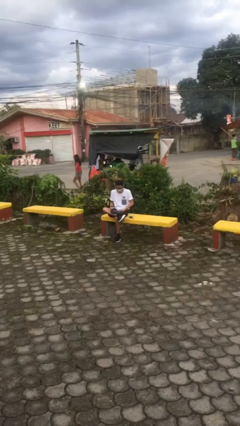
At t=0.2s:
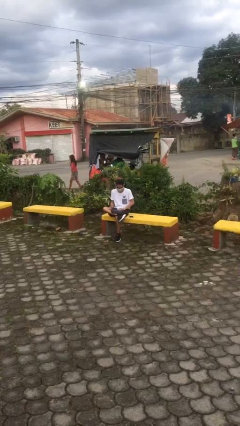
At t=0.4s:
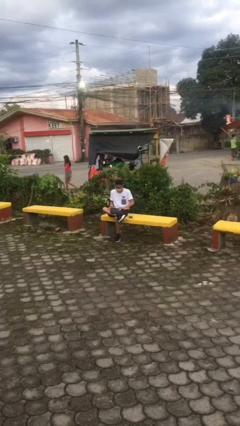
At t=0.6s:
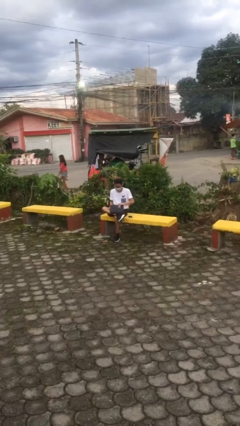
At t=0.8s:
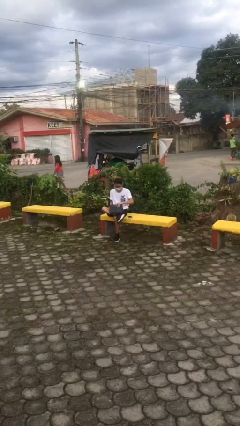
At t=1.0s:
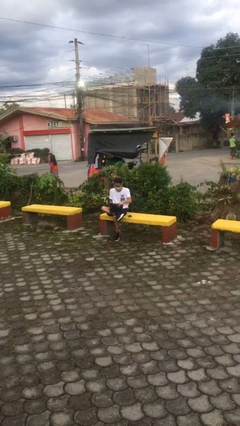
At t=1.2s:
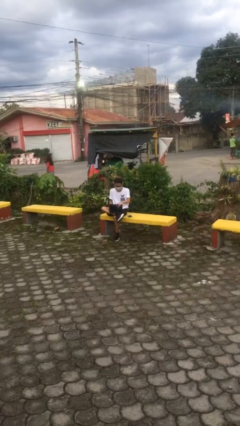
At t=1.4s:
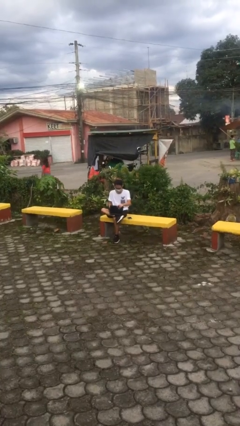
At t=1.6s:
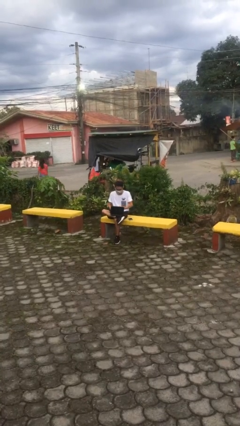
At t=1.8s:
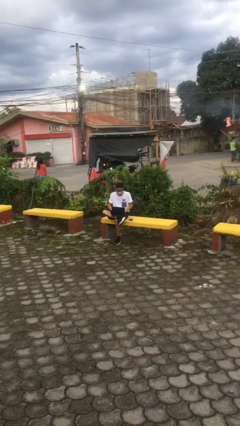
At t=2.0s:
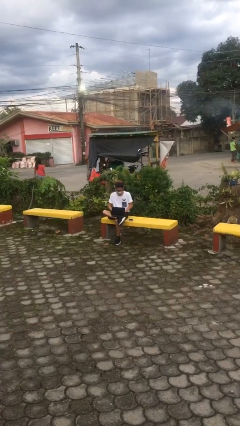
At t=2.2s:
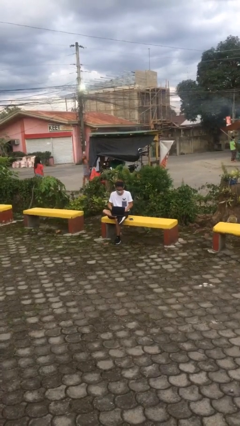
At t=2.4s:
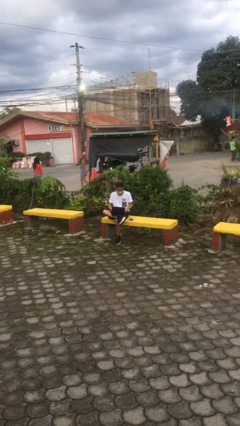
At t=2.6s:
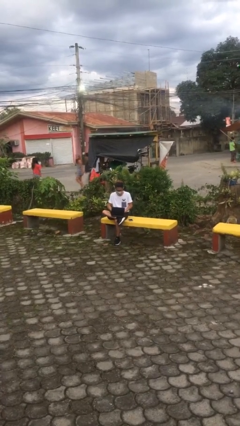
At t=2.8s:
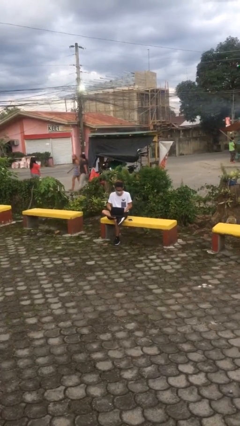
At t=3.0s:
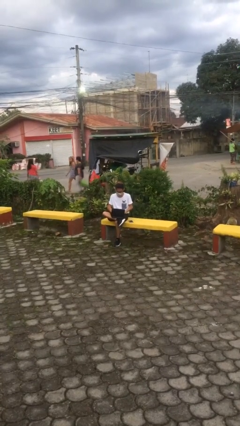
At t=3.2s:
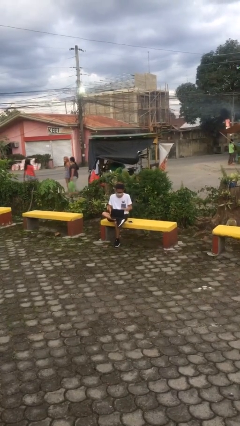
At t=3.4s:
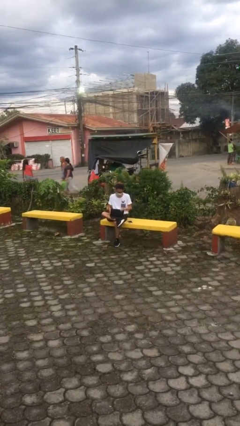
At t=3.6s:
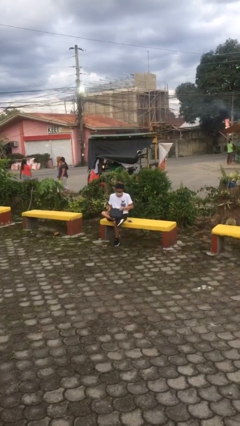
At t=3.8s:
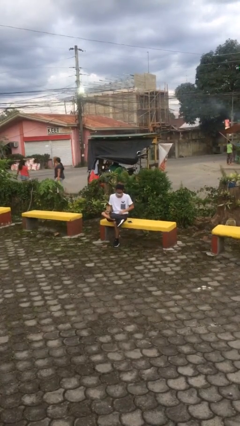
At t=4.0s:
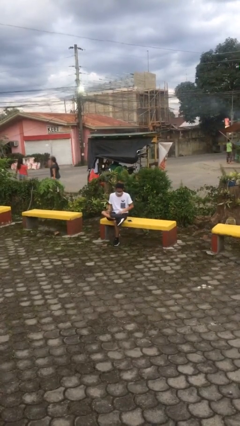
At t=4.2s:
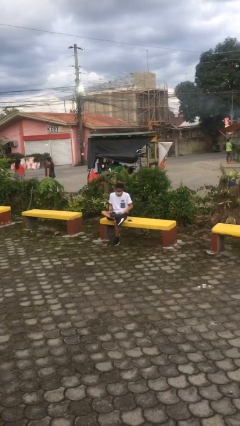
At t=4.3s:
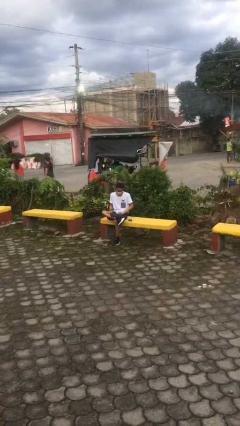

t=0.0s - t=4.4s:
person interacts with laptop

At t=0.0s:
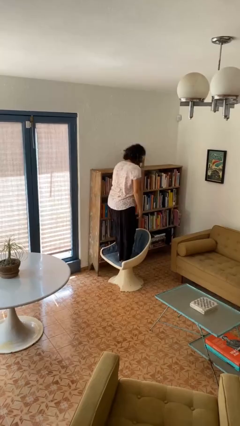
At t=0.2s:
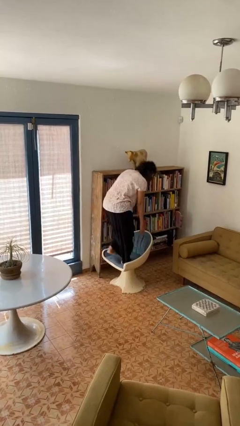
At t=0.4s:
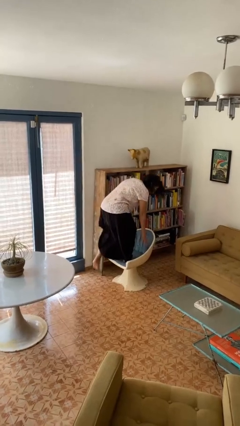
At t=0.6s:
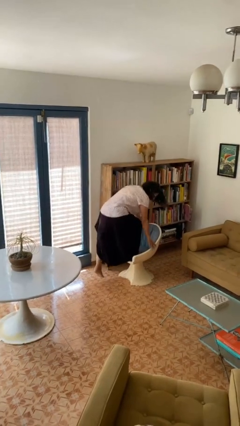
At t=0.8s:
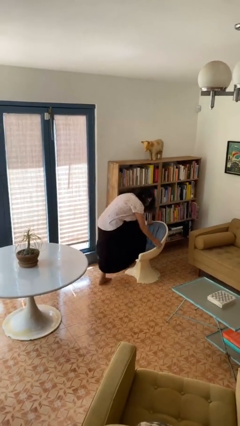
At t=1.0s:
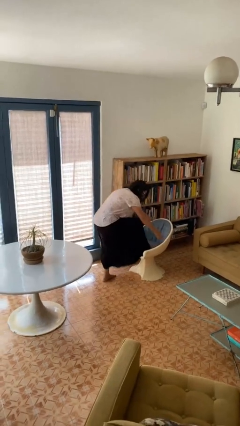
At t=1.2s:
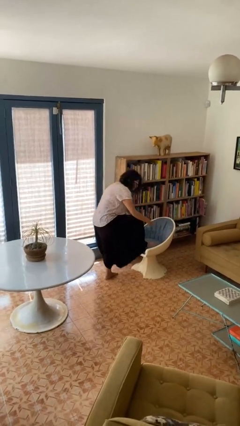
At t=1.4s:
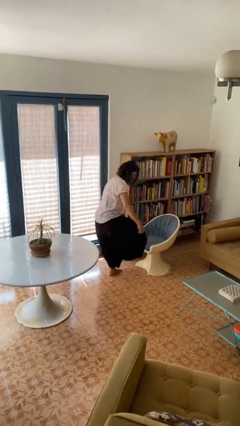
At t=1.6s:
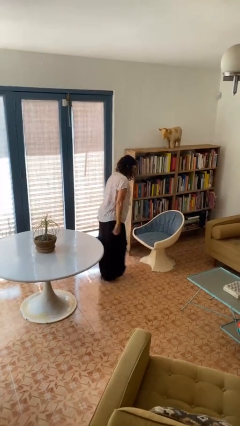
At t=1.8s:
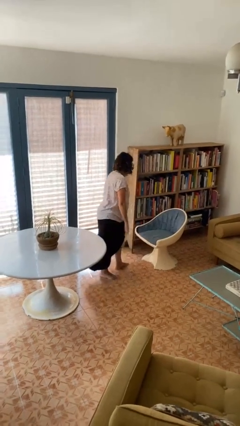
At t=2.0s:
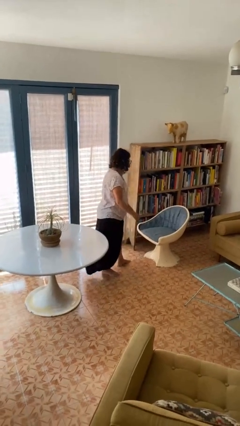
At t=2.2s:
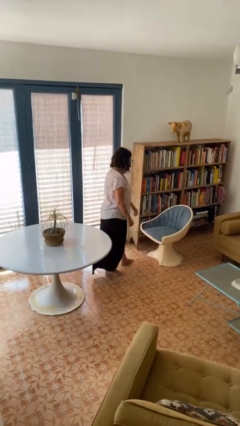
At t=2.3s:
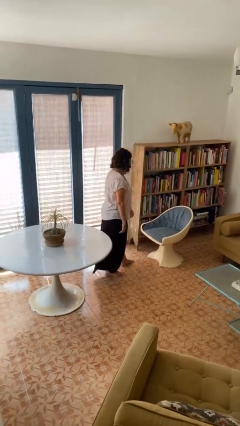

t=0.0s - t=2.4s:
person climbs off chair

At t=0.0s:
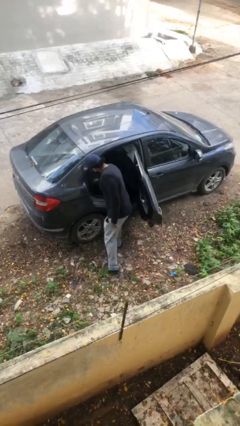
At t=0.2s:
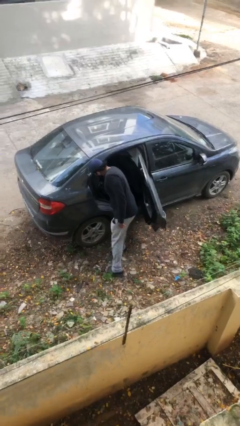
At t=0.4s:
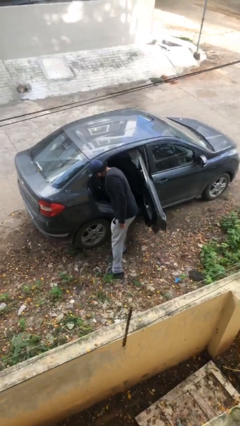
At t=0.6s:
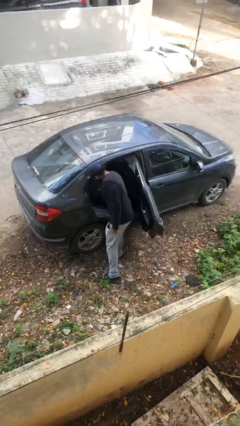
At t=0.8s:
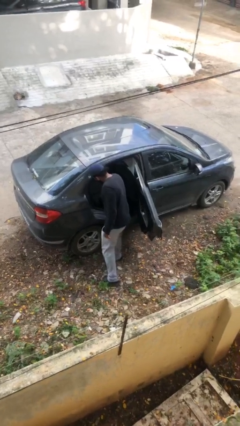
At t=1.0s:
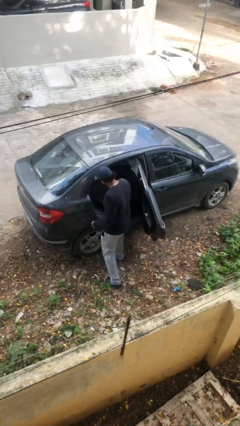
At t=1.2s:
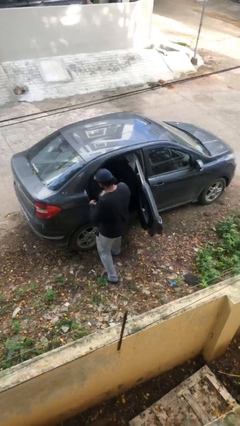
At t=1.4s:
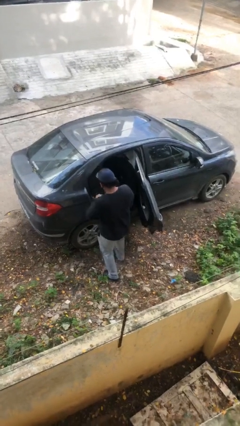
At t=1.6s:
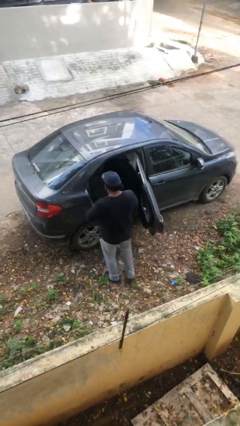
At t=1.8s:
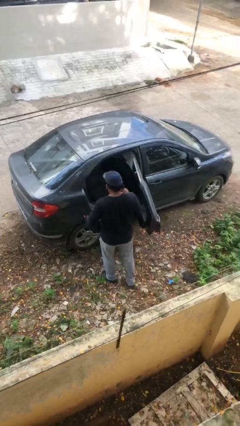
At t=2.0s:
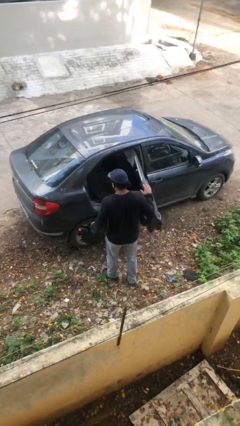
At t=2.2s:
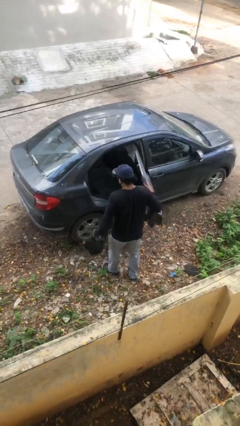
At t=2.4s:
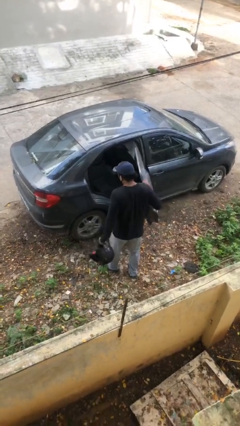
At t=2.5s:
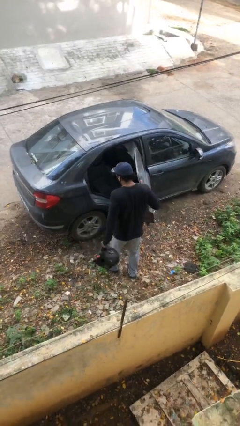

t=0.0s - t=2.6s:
person unloads car

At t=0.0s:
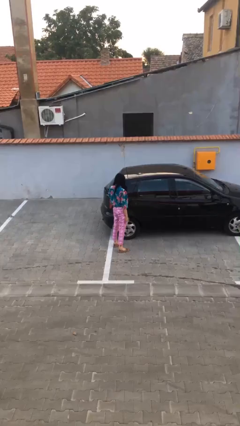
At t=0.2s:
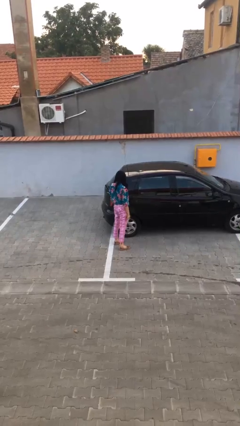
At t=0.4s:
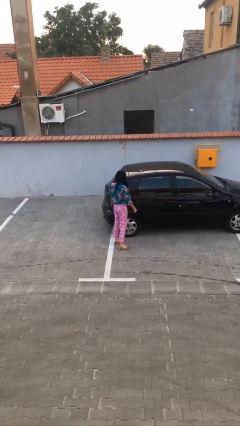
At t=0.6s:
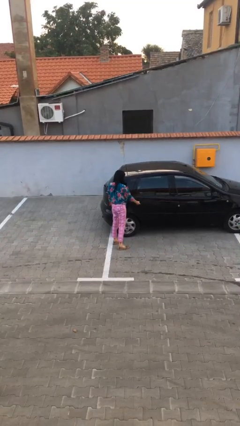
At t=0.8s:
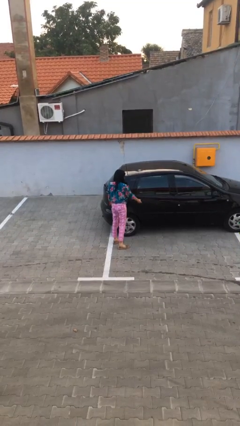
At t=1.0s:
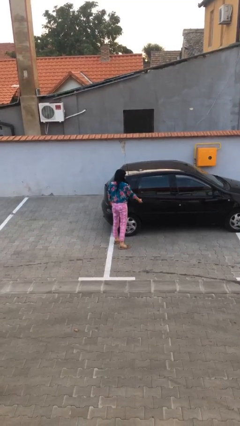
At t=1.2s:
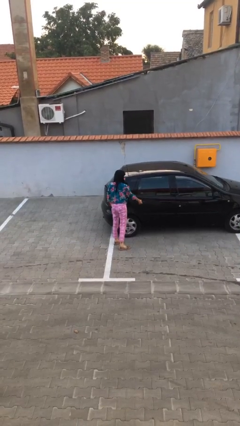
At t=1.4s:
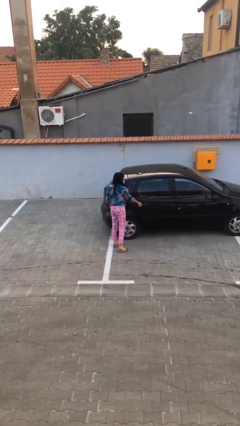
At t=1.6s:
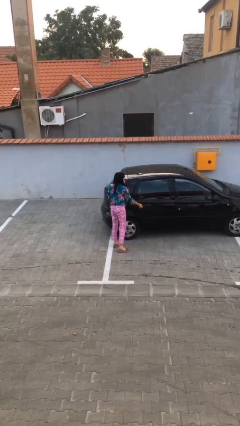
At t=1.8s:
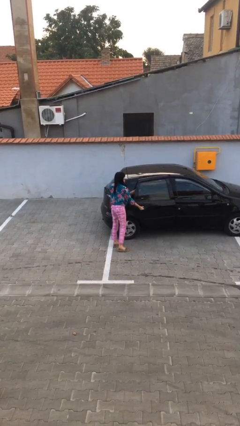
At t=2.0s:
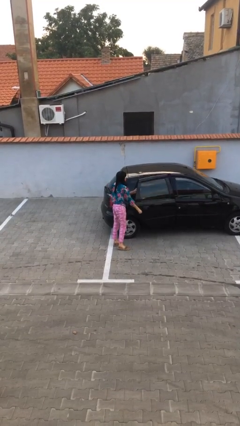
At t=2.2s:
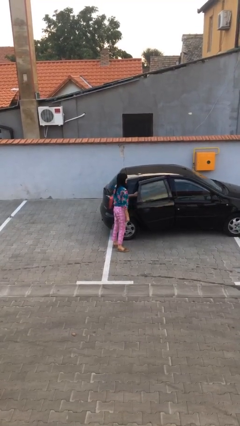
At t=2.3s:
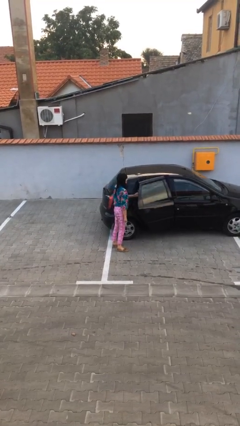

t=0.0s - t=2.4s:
person opens car door

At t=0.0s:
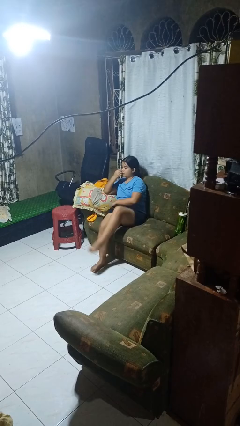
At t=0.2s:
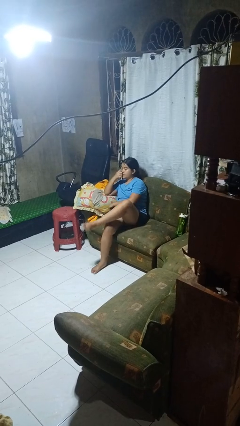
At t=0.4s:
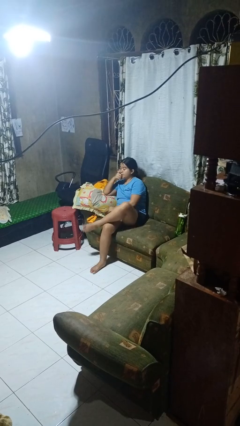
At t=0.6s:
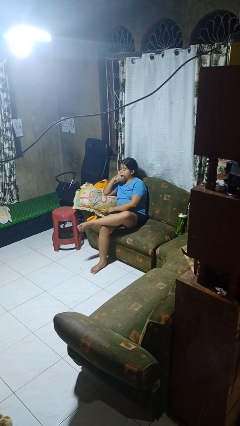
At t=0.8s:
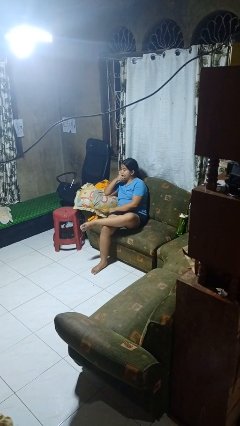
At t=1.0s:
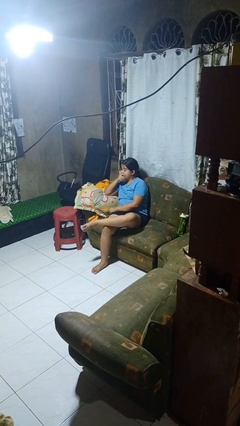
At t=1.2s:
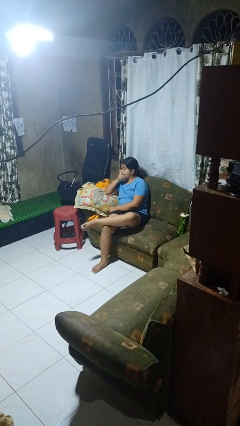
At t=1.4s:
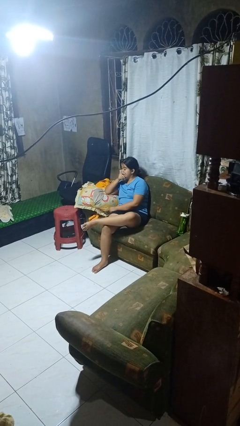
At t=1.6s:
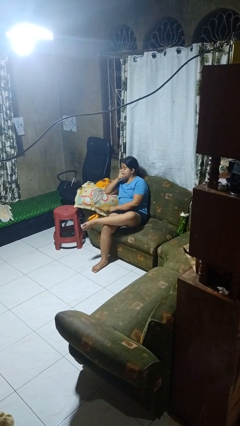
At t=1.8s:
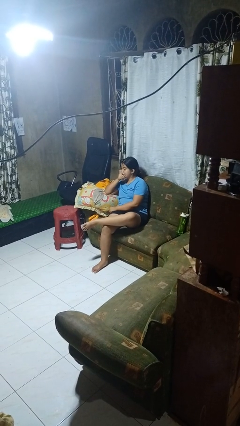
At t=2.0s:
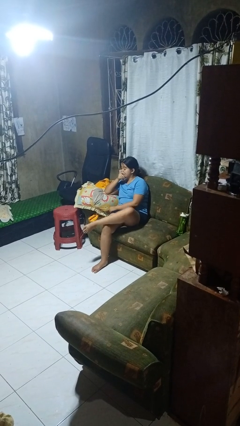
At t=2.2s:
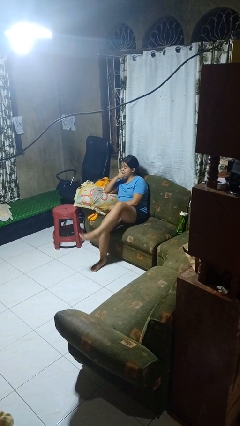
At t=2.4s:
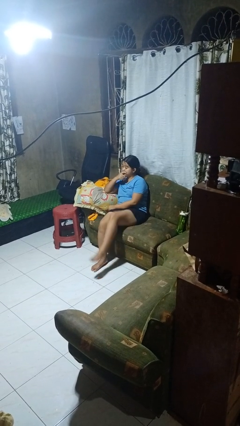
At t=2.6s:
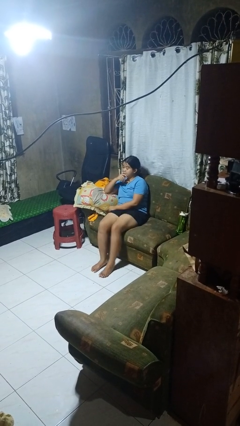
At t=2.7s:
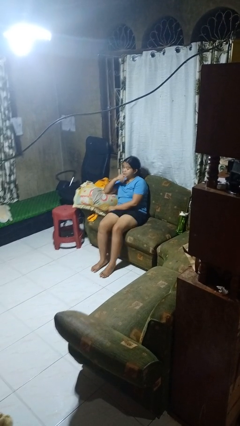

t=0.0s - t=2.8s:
person crosses legs

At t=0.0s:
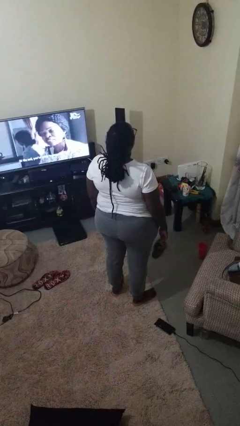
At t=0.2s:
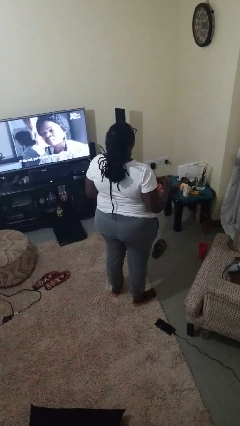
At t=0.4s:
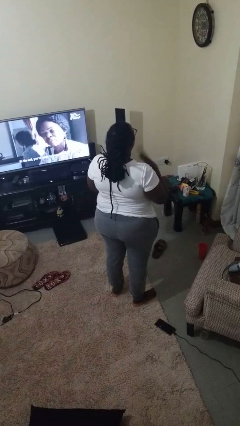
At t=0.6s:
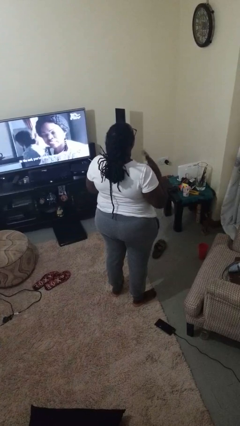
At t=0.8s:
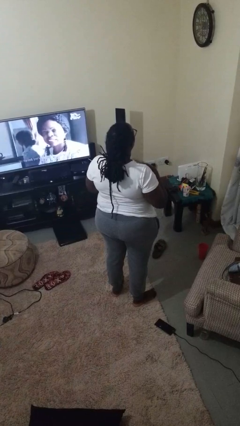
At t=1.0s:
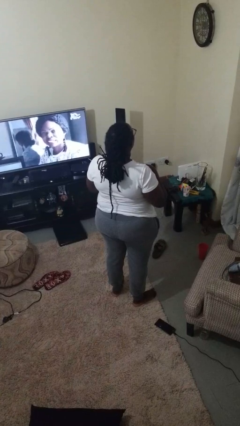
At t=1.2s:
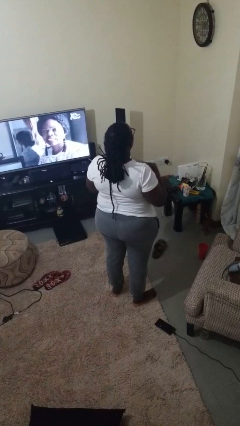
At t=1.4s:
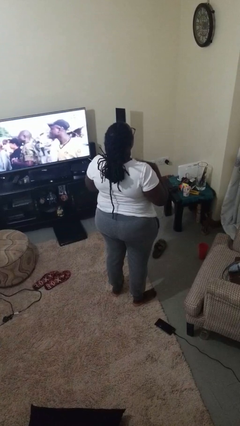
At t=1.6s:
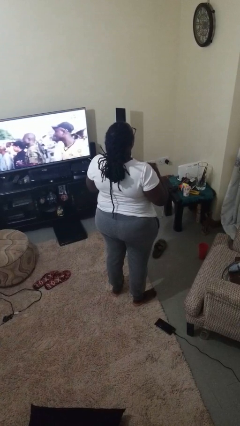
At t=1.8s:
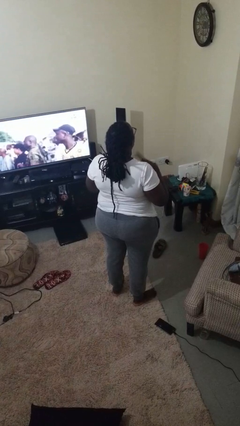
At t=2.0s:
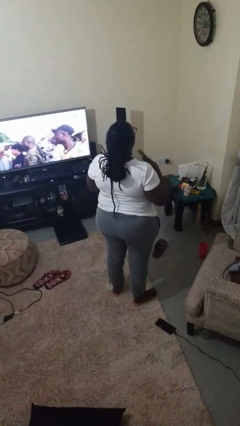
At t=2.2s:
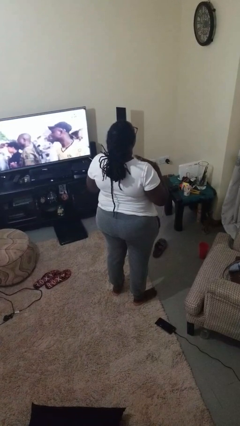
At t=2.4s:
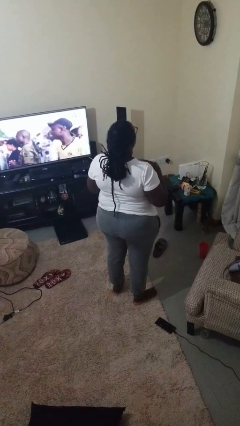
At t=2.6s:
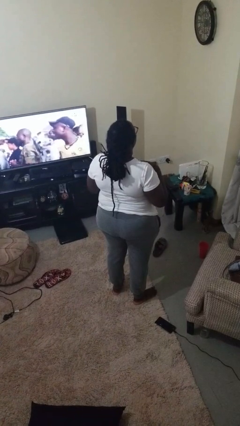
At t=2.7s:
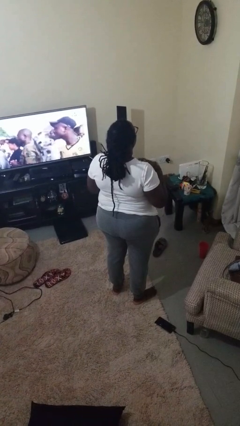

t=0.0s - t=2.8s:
person drums on chest
